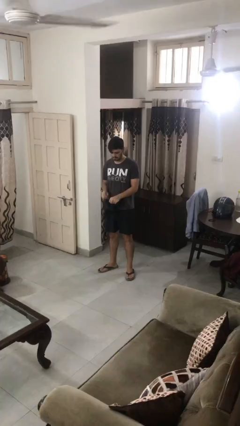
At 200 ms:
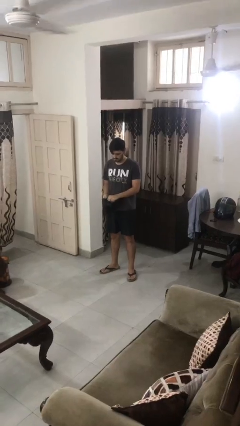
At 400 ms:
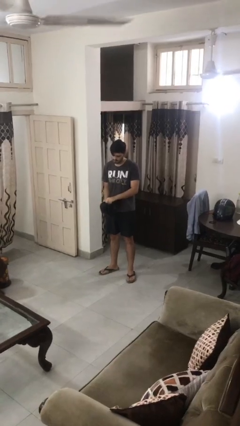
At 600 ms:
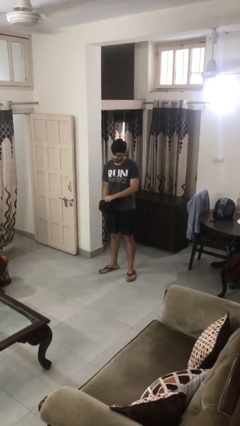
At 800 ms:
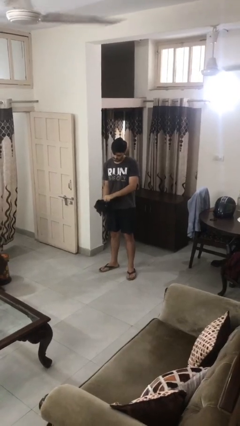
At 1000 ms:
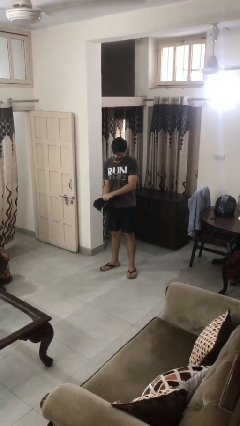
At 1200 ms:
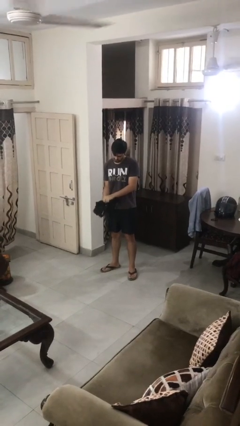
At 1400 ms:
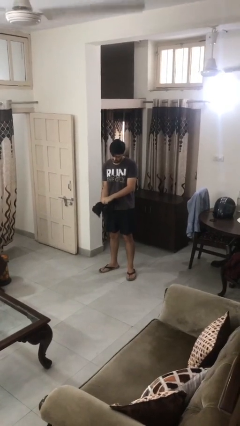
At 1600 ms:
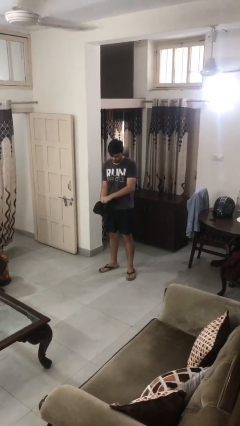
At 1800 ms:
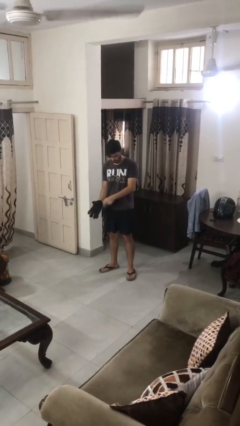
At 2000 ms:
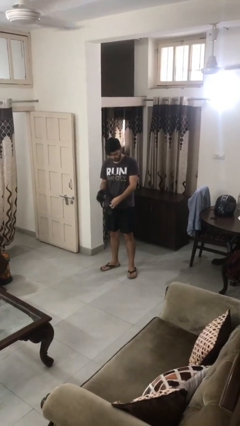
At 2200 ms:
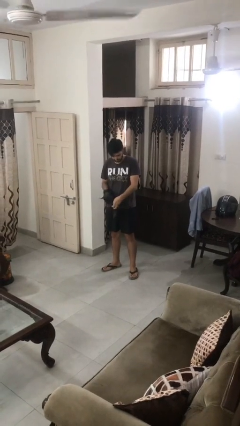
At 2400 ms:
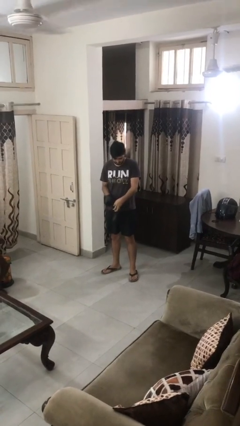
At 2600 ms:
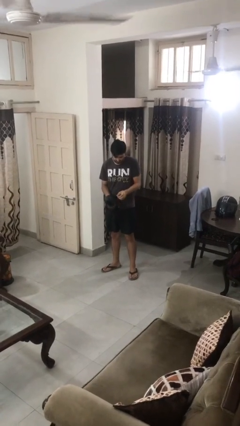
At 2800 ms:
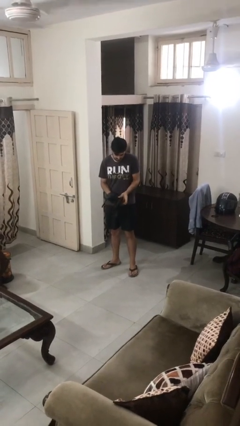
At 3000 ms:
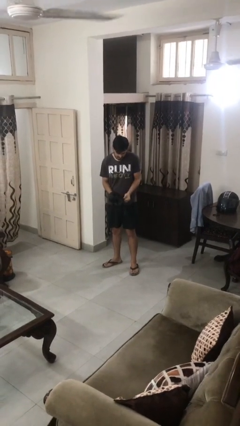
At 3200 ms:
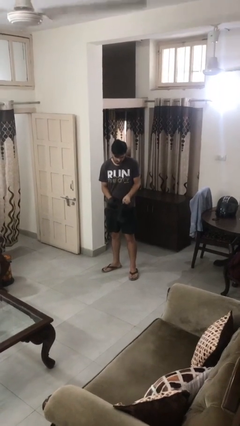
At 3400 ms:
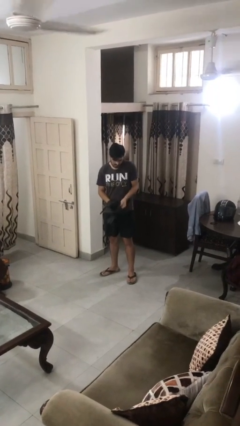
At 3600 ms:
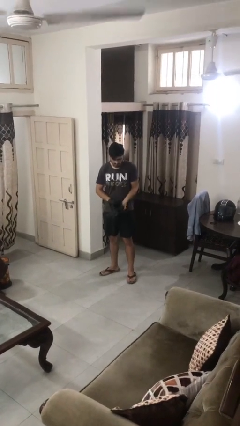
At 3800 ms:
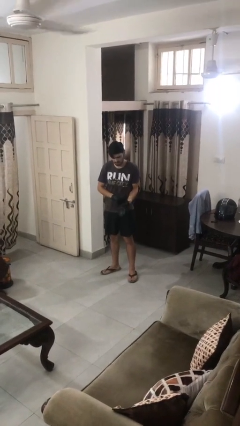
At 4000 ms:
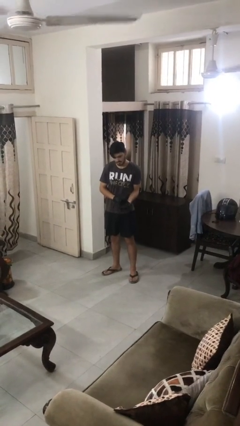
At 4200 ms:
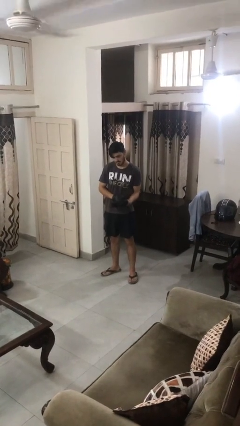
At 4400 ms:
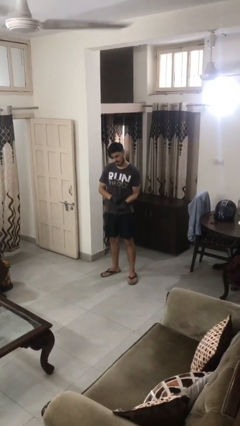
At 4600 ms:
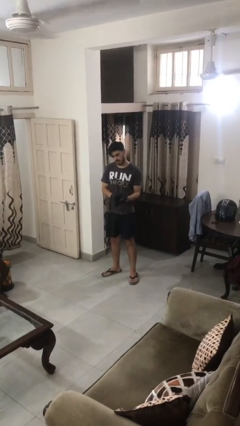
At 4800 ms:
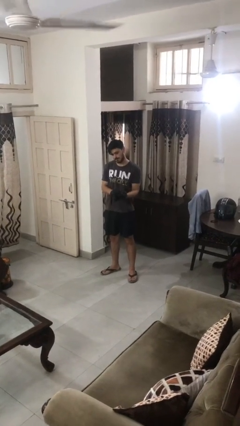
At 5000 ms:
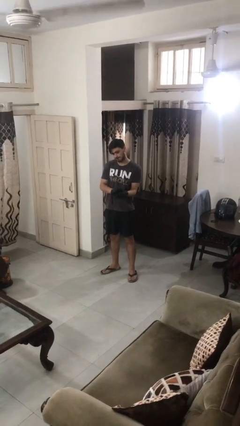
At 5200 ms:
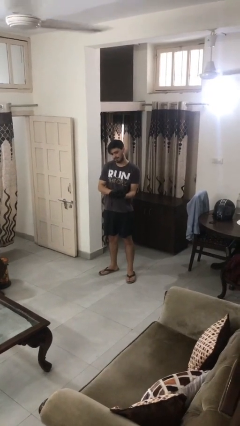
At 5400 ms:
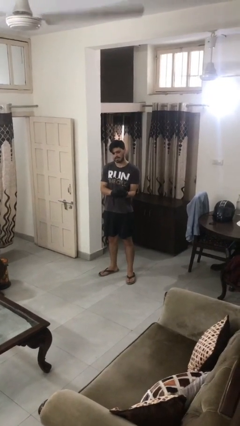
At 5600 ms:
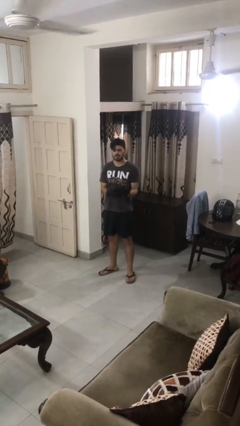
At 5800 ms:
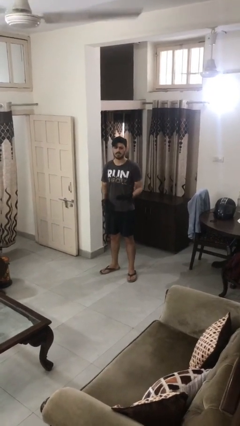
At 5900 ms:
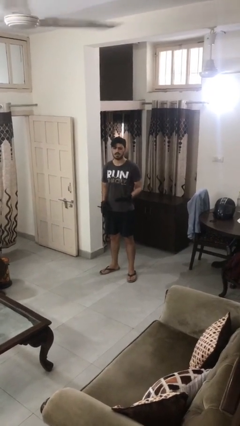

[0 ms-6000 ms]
person puts on gloves

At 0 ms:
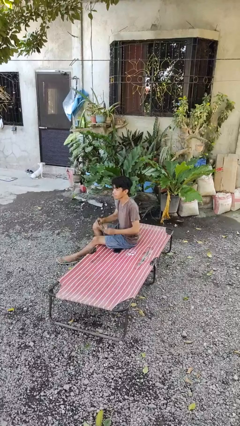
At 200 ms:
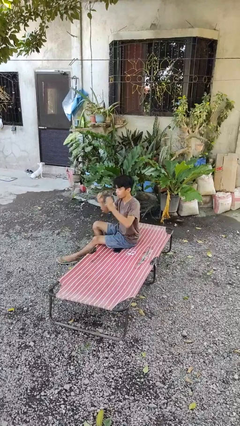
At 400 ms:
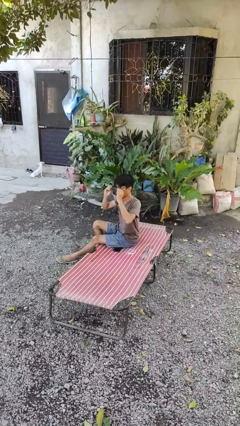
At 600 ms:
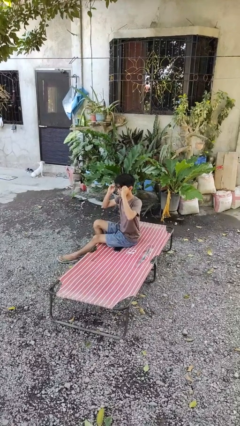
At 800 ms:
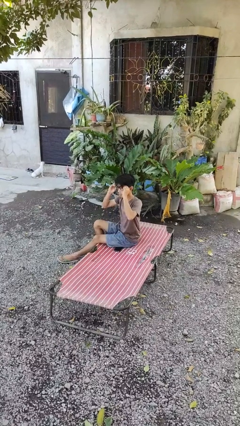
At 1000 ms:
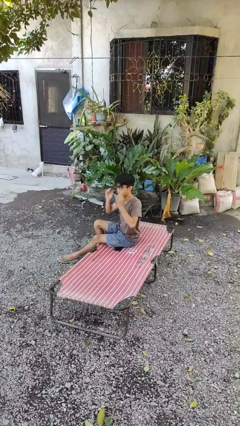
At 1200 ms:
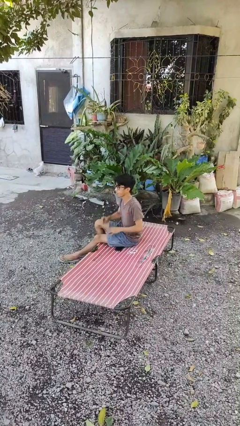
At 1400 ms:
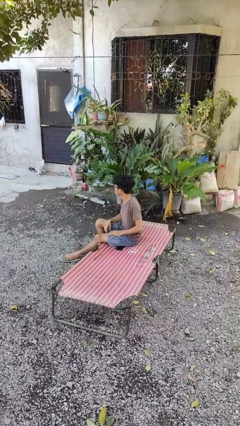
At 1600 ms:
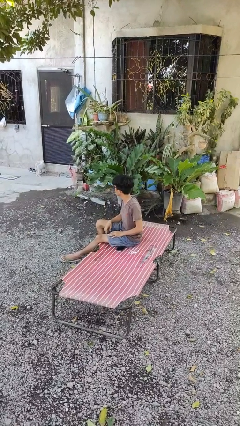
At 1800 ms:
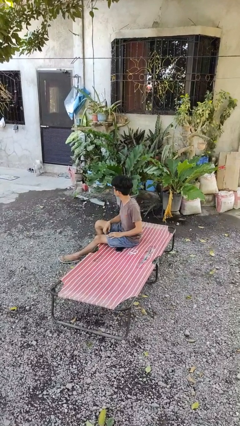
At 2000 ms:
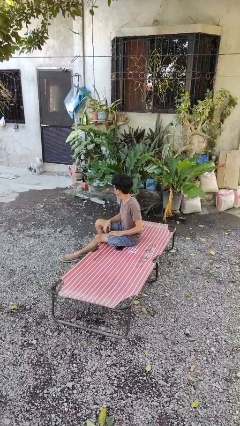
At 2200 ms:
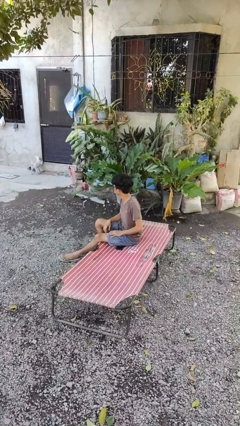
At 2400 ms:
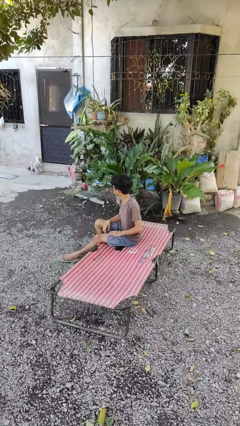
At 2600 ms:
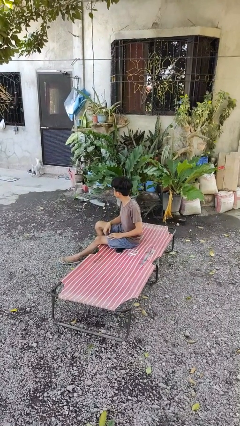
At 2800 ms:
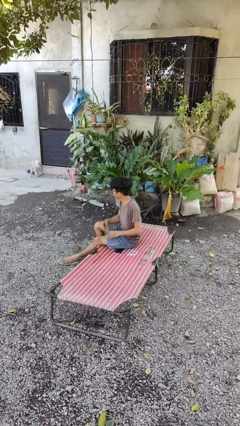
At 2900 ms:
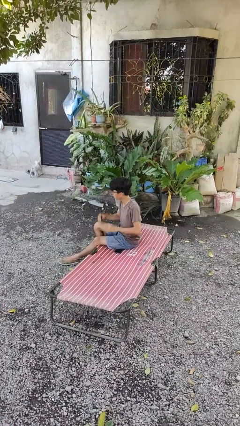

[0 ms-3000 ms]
person puts on glasses

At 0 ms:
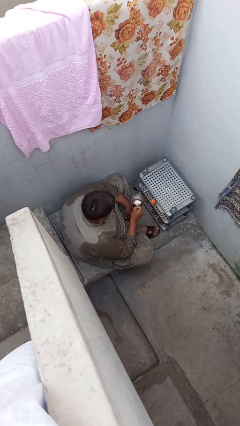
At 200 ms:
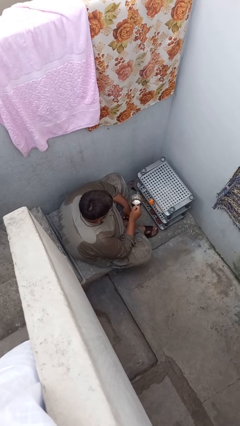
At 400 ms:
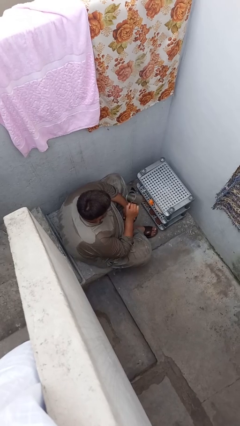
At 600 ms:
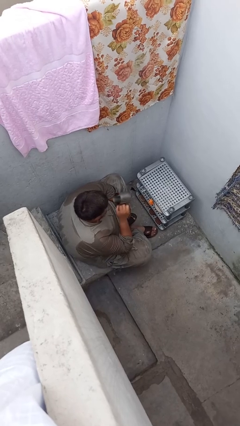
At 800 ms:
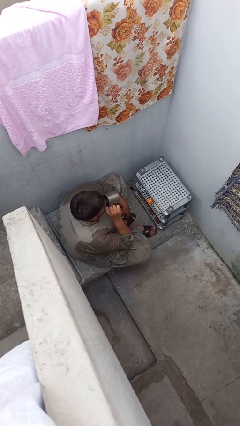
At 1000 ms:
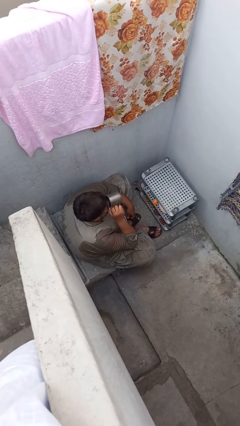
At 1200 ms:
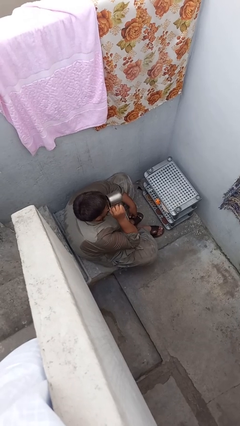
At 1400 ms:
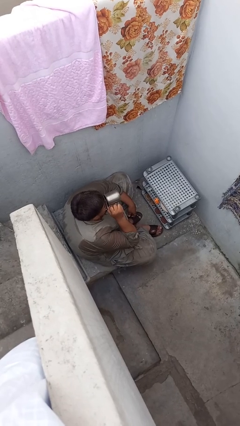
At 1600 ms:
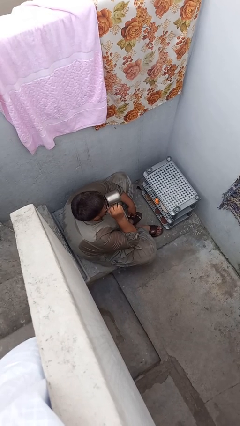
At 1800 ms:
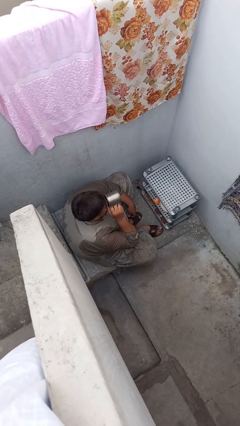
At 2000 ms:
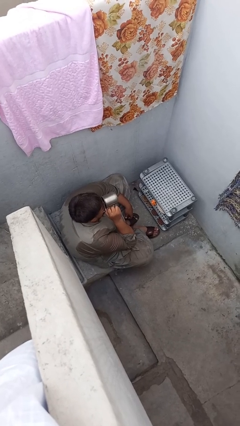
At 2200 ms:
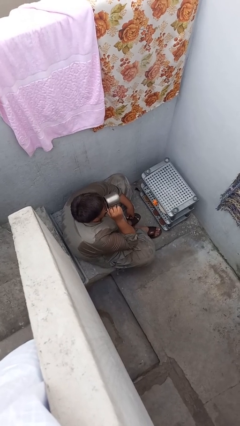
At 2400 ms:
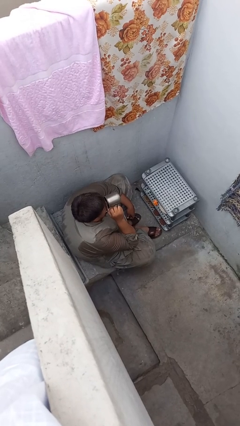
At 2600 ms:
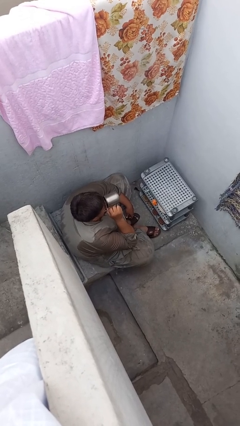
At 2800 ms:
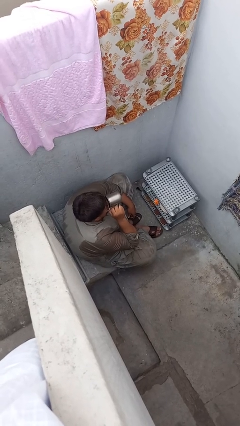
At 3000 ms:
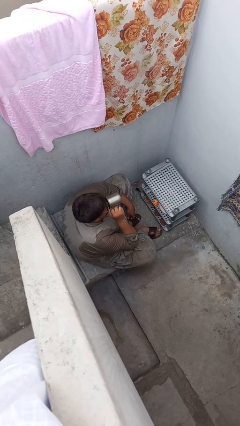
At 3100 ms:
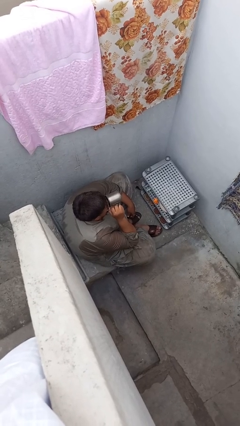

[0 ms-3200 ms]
person drinks from mug

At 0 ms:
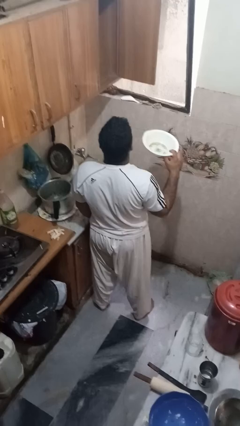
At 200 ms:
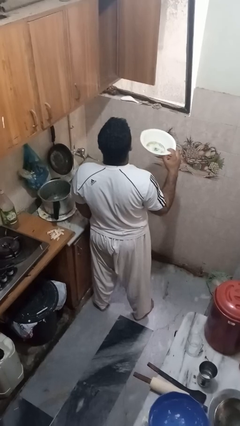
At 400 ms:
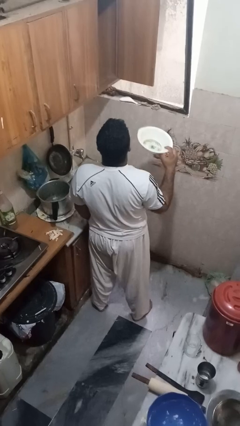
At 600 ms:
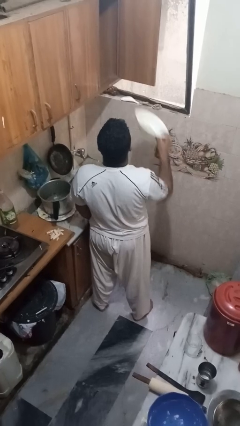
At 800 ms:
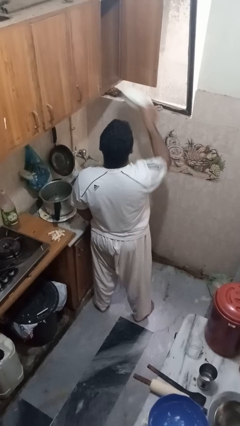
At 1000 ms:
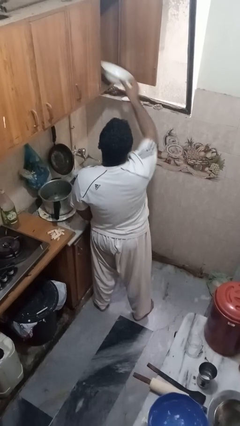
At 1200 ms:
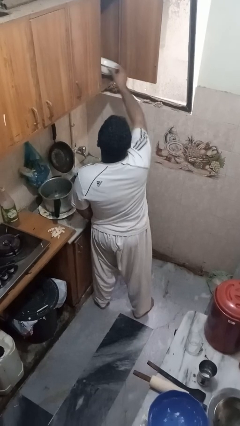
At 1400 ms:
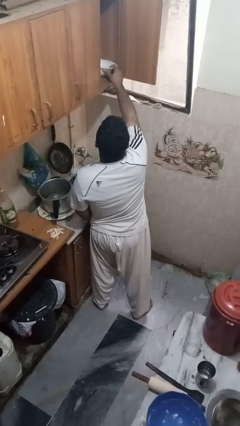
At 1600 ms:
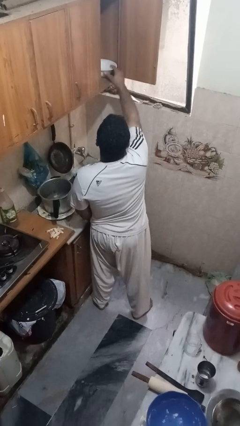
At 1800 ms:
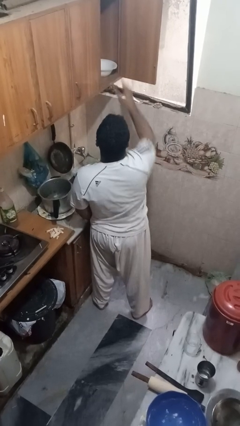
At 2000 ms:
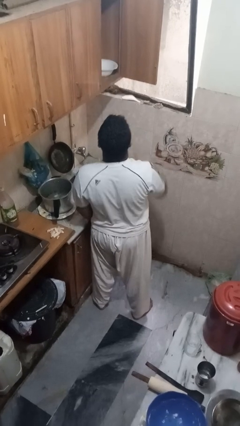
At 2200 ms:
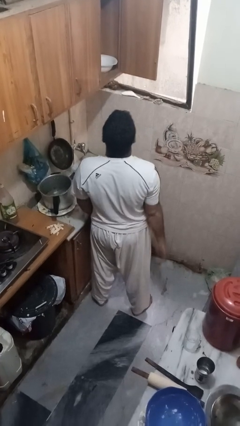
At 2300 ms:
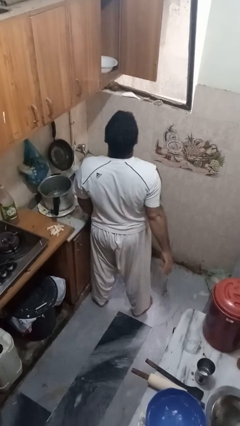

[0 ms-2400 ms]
person puts object in cabinet

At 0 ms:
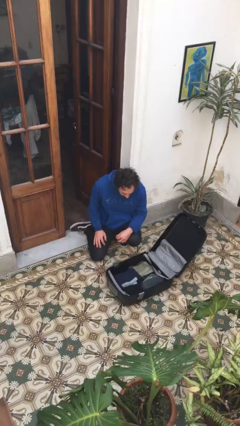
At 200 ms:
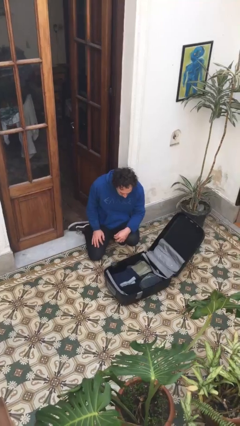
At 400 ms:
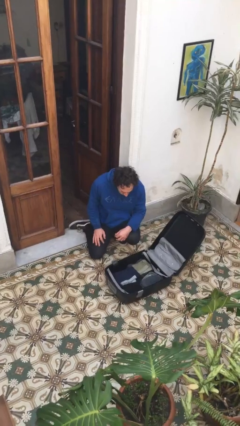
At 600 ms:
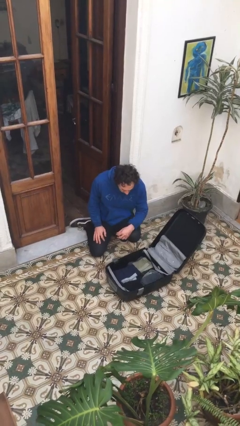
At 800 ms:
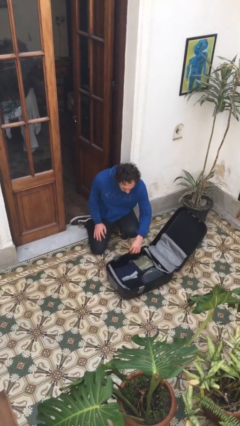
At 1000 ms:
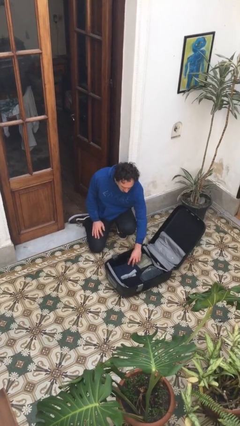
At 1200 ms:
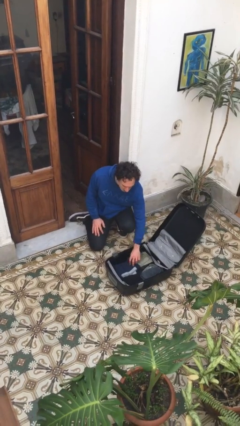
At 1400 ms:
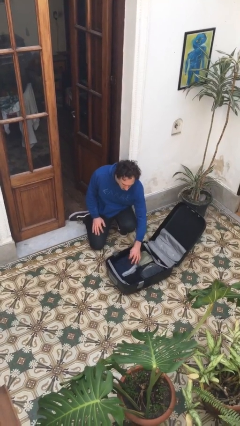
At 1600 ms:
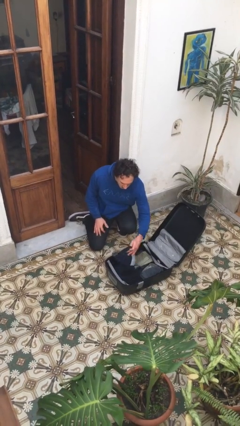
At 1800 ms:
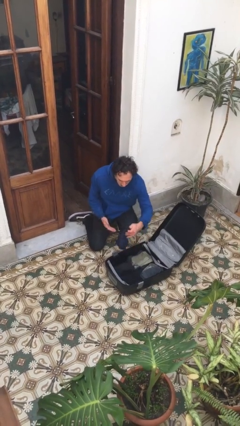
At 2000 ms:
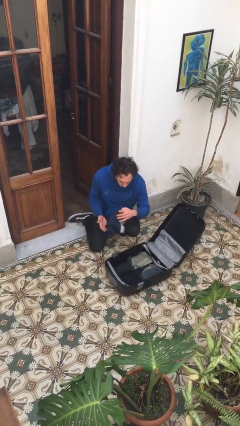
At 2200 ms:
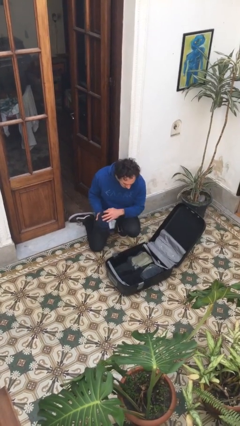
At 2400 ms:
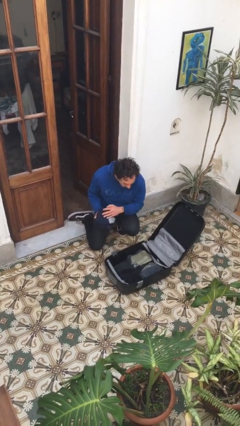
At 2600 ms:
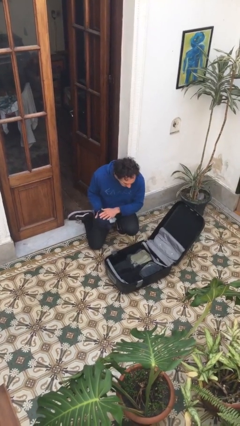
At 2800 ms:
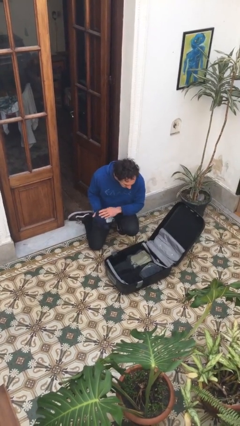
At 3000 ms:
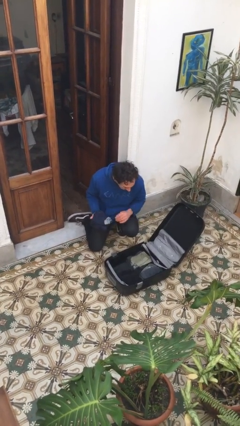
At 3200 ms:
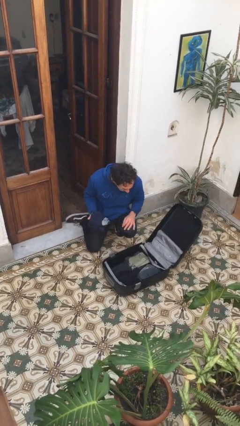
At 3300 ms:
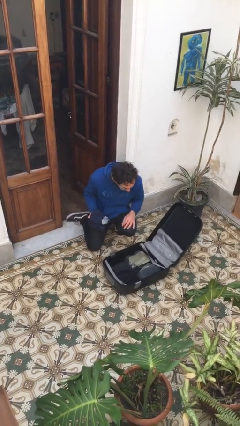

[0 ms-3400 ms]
person unloads clothes from suitcase
